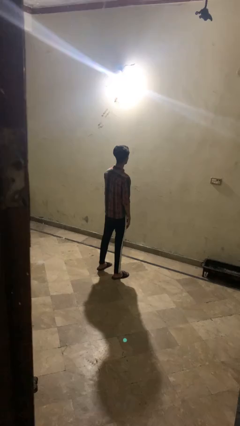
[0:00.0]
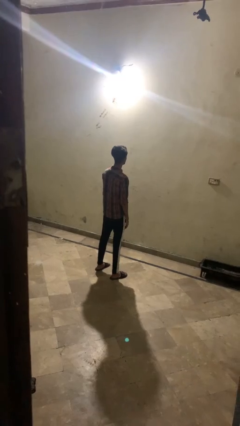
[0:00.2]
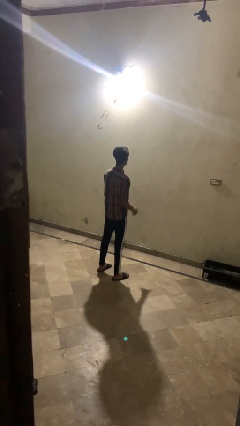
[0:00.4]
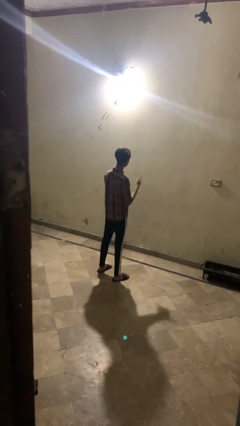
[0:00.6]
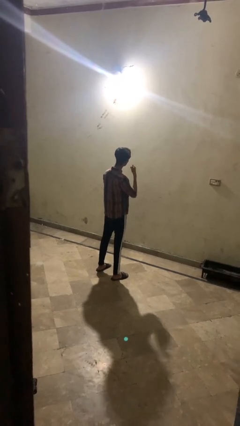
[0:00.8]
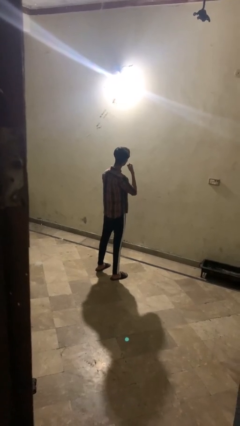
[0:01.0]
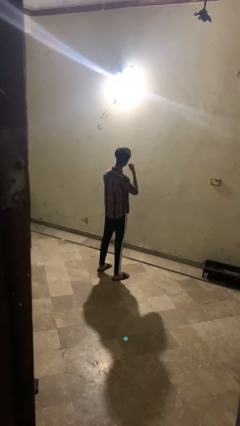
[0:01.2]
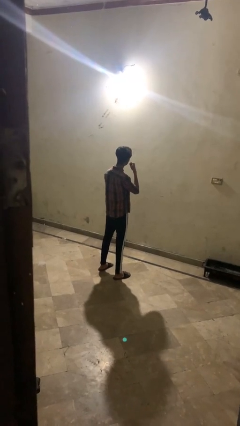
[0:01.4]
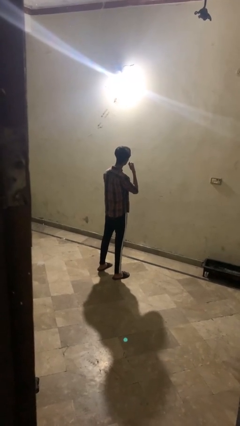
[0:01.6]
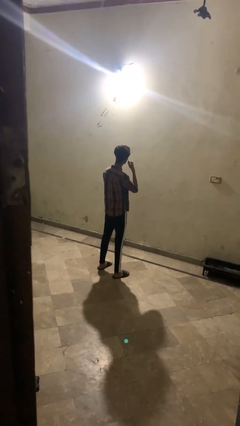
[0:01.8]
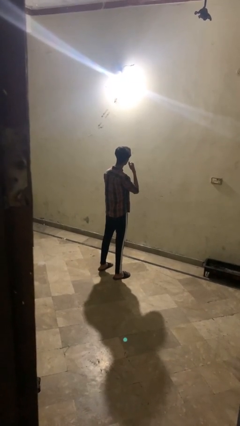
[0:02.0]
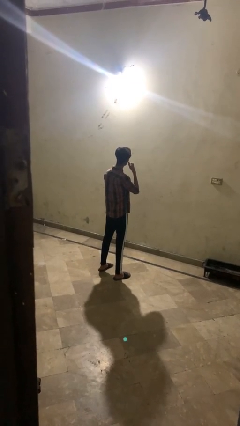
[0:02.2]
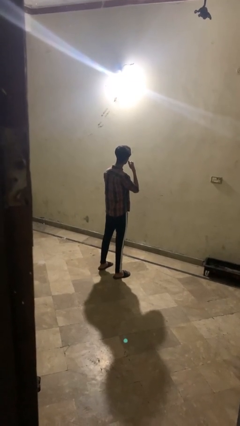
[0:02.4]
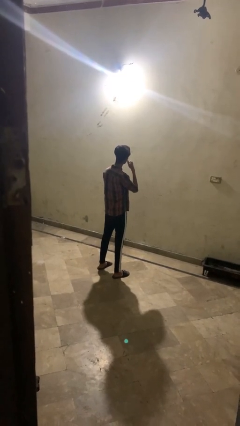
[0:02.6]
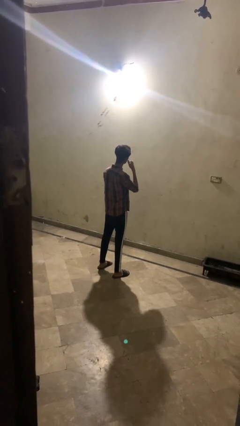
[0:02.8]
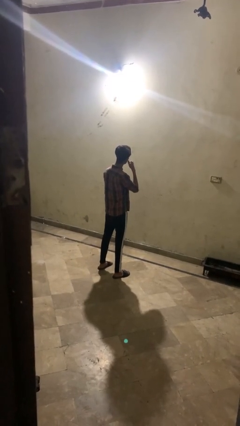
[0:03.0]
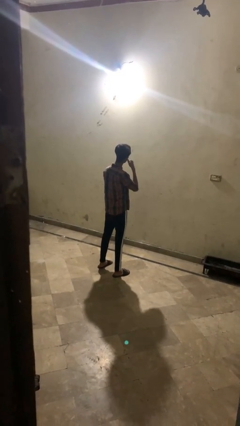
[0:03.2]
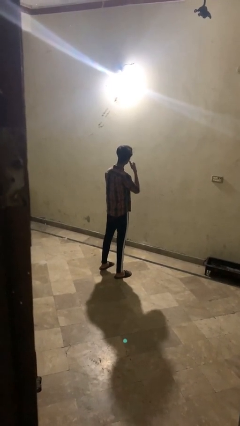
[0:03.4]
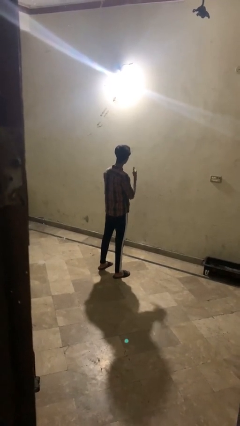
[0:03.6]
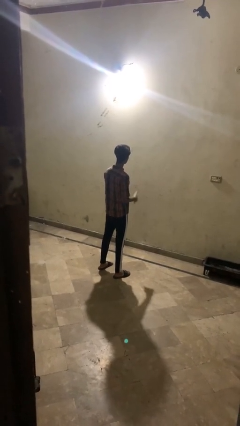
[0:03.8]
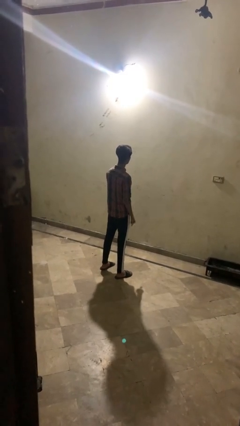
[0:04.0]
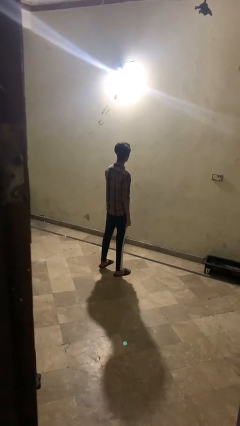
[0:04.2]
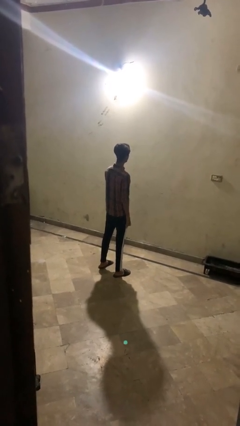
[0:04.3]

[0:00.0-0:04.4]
person gestures call me

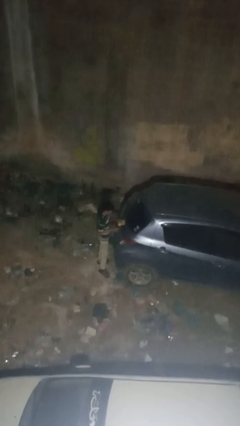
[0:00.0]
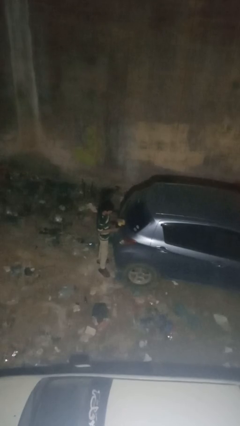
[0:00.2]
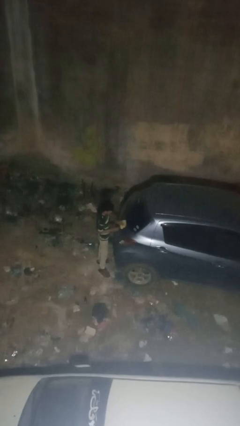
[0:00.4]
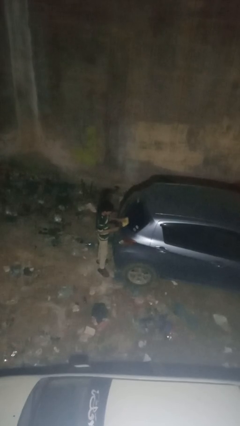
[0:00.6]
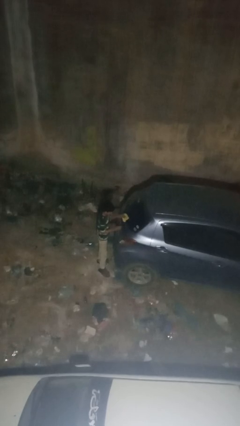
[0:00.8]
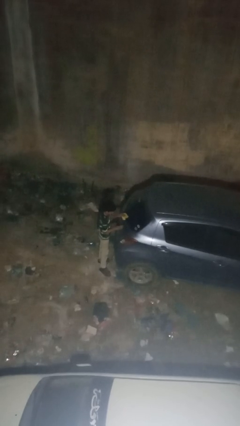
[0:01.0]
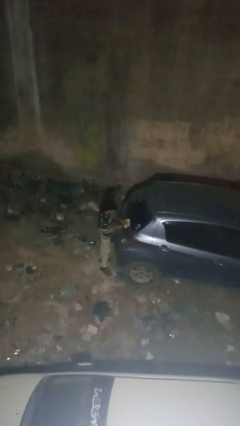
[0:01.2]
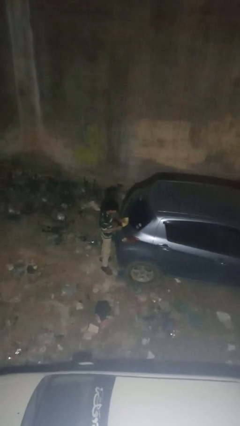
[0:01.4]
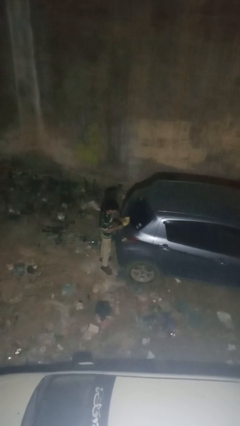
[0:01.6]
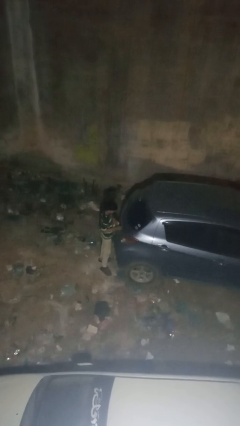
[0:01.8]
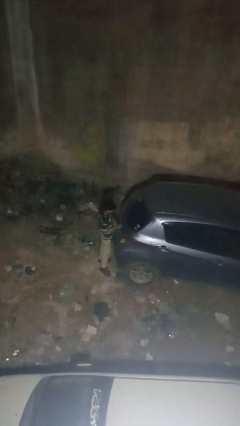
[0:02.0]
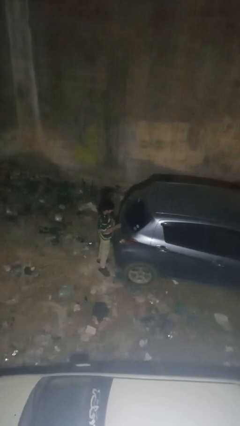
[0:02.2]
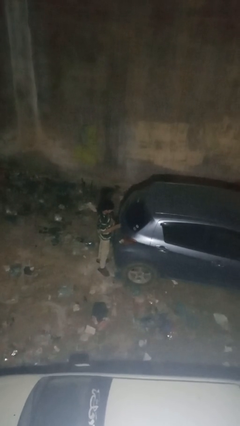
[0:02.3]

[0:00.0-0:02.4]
person polishes car with rag

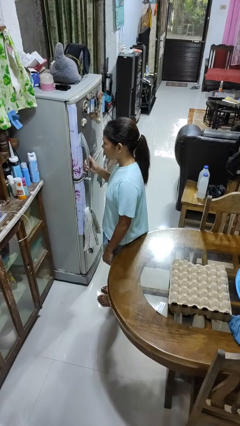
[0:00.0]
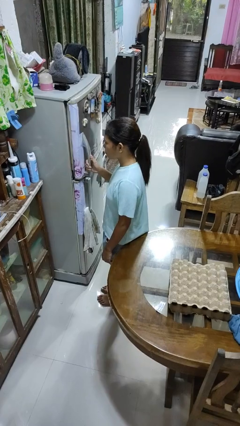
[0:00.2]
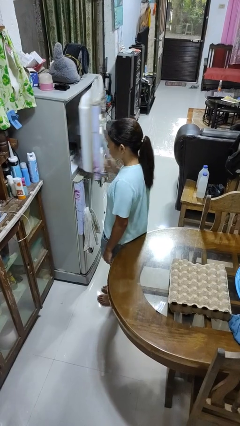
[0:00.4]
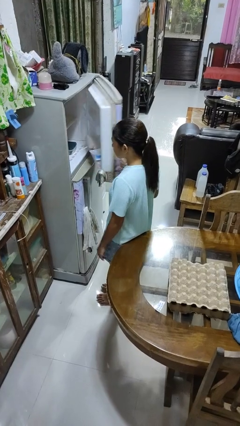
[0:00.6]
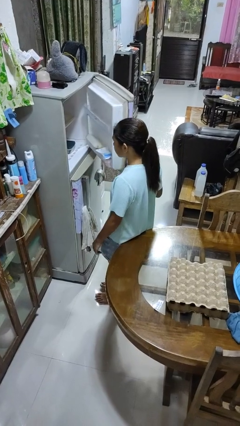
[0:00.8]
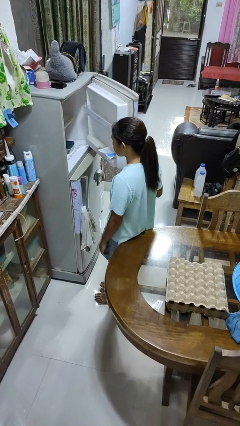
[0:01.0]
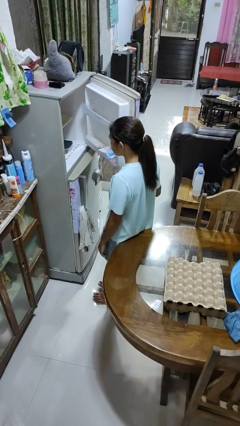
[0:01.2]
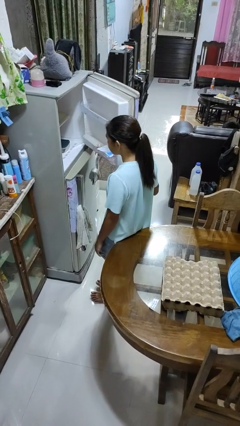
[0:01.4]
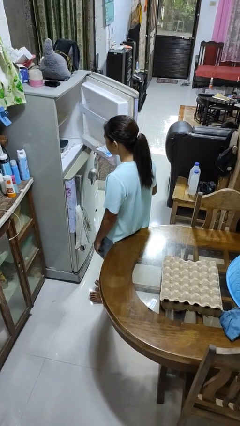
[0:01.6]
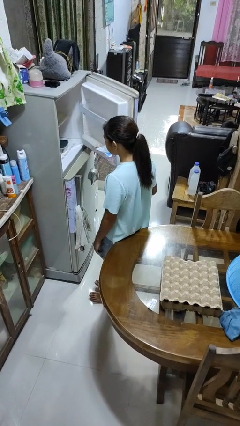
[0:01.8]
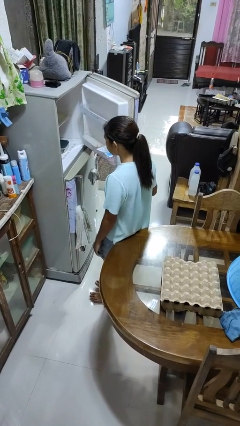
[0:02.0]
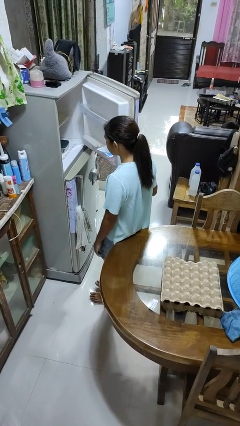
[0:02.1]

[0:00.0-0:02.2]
person opens refrigerator

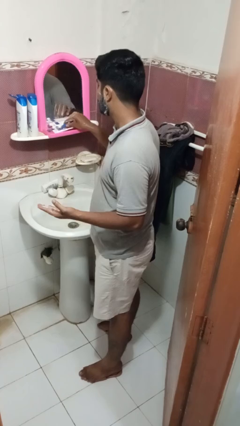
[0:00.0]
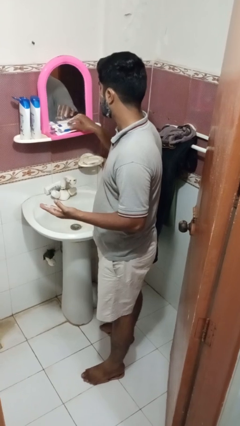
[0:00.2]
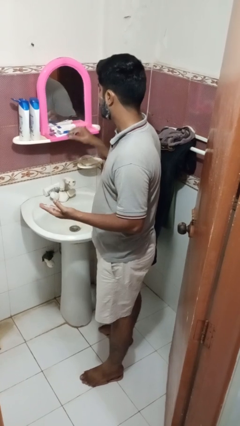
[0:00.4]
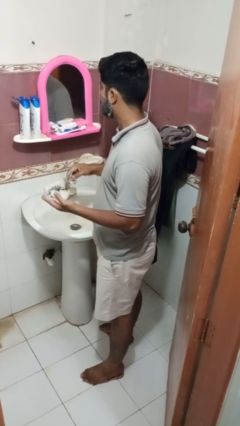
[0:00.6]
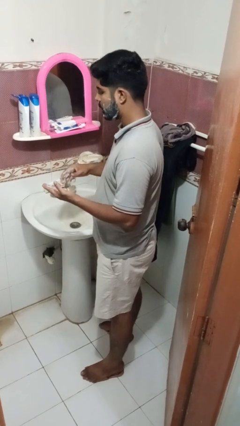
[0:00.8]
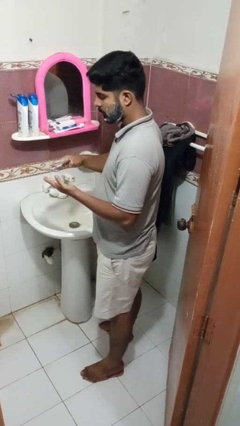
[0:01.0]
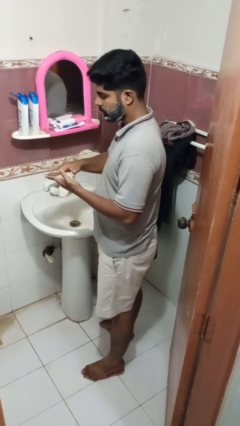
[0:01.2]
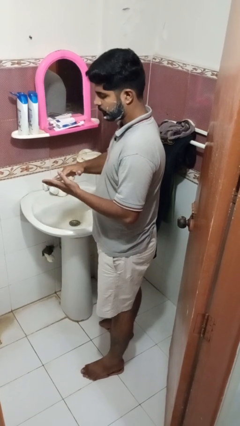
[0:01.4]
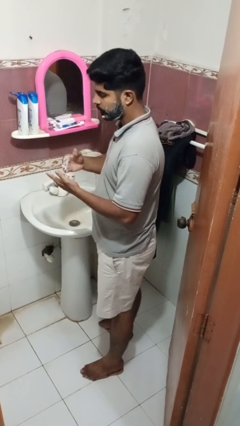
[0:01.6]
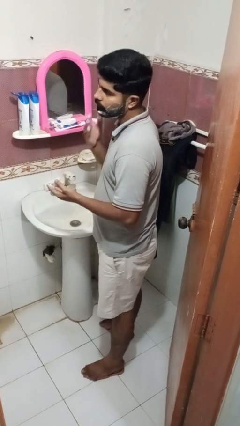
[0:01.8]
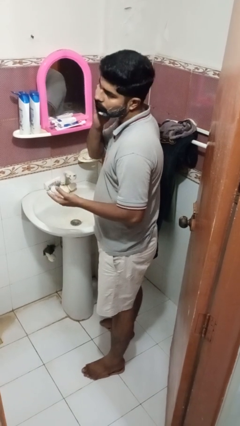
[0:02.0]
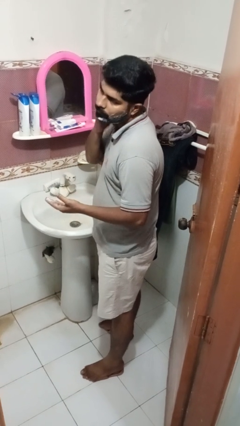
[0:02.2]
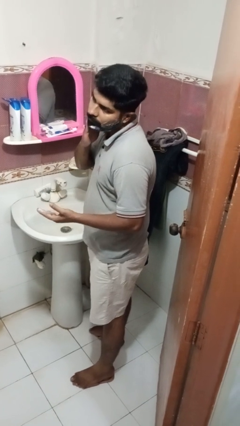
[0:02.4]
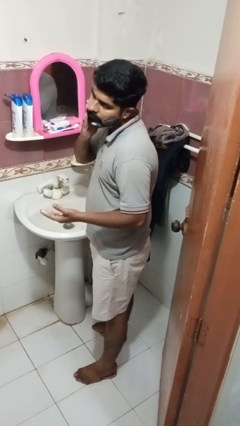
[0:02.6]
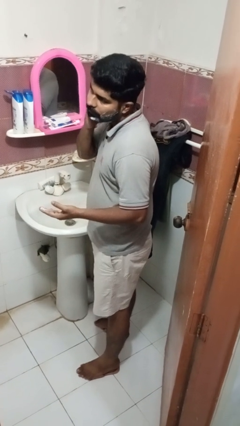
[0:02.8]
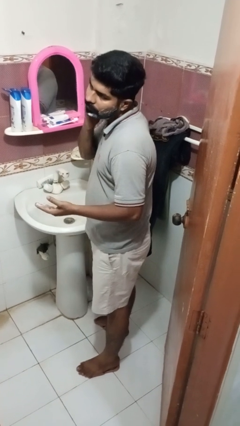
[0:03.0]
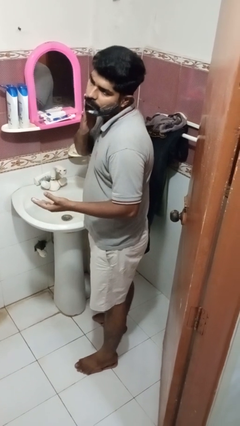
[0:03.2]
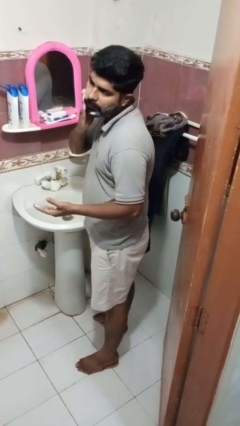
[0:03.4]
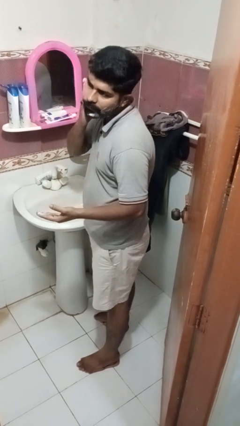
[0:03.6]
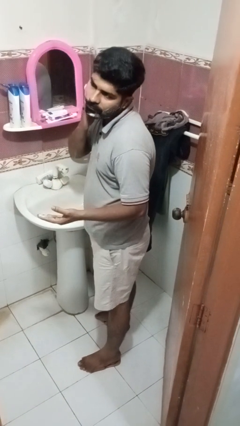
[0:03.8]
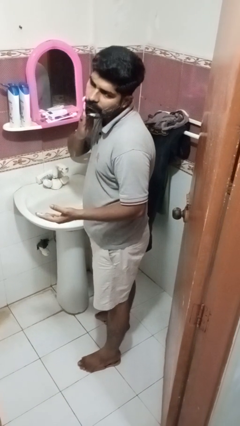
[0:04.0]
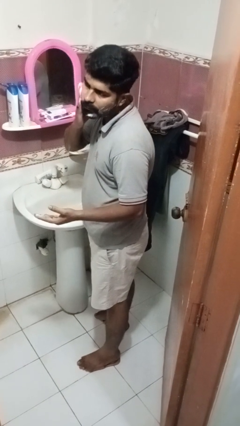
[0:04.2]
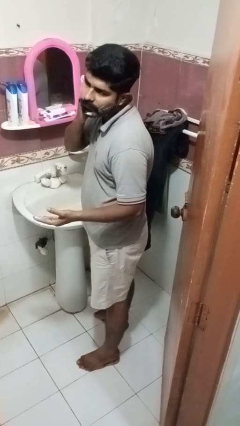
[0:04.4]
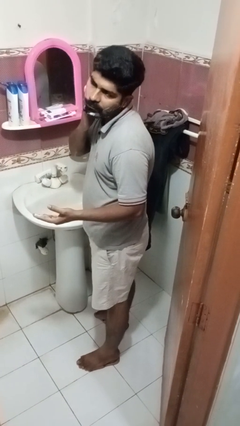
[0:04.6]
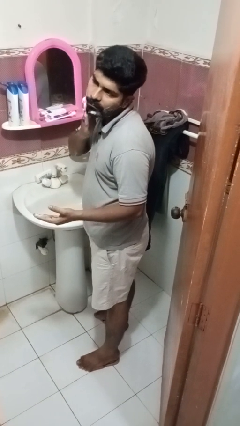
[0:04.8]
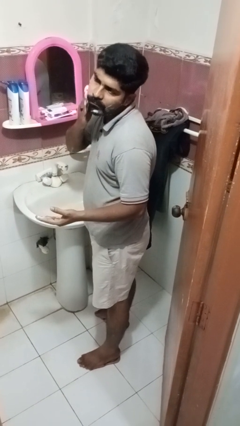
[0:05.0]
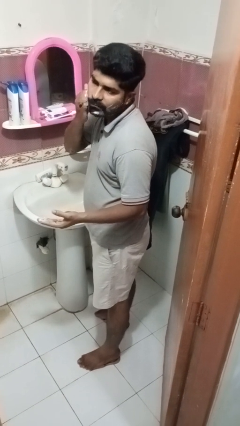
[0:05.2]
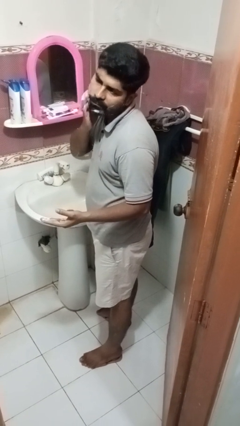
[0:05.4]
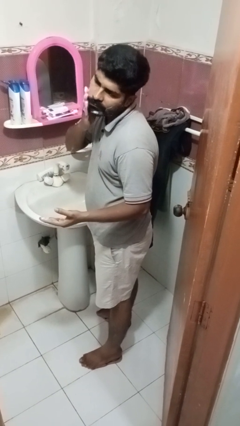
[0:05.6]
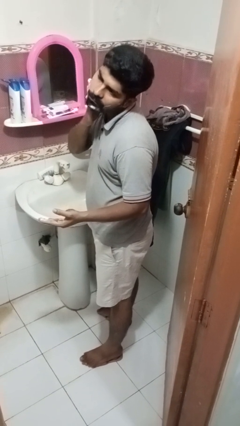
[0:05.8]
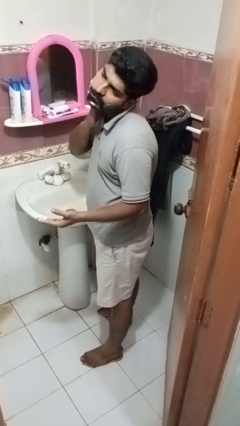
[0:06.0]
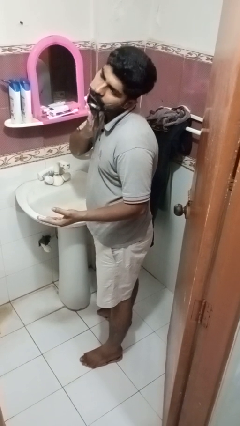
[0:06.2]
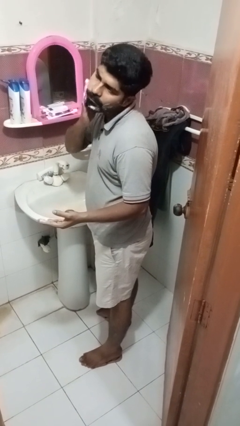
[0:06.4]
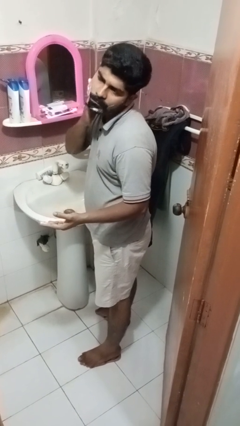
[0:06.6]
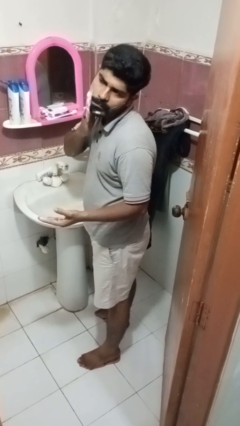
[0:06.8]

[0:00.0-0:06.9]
person applies shaving cream

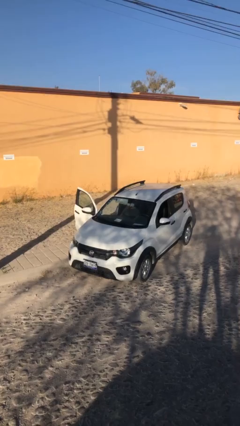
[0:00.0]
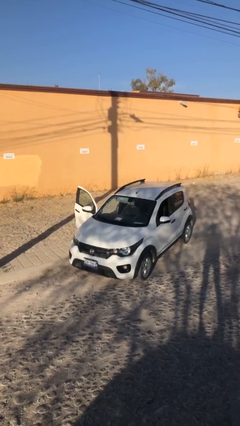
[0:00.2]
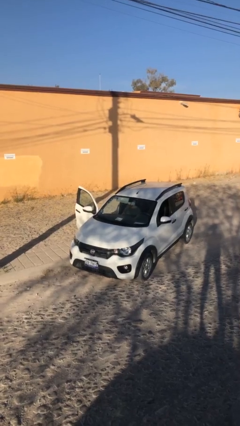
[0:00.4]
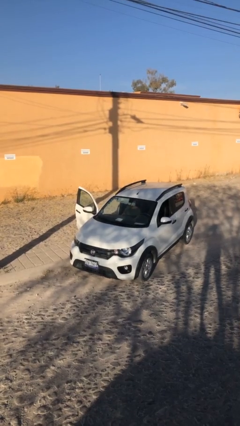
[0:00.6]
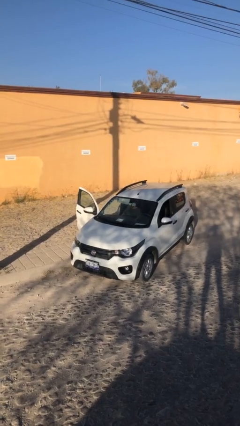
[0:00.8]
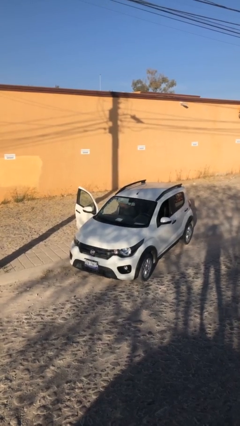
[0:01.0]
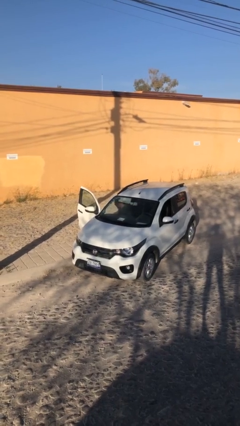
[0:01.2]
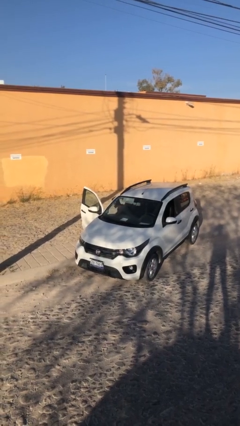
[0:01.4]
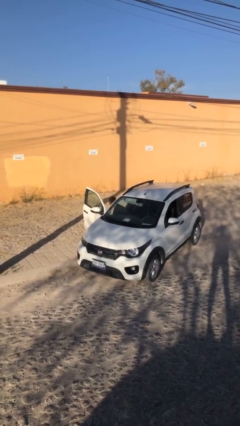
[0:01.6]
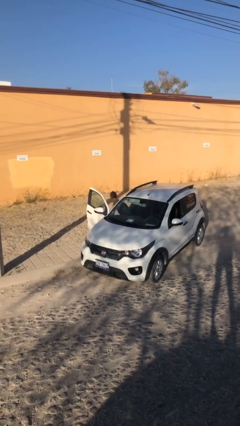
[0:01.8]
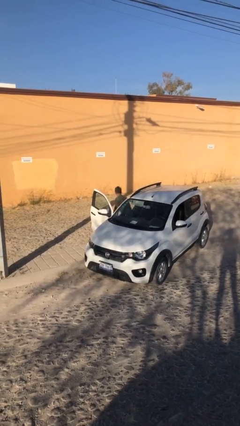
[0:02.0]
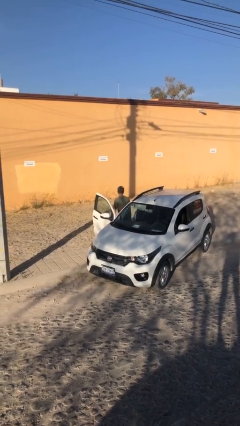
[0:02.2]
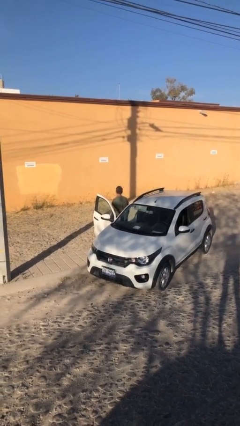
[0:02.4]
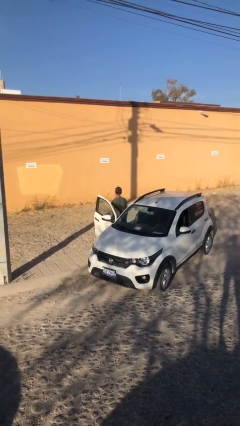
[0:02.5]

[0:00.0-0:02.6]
person exits car
